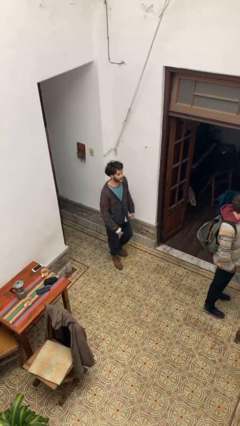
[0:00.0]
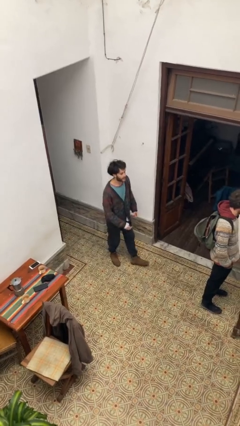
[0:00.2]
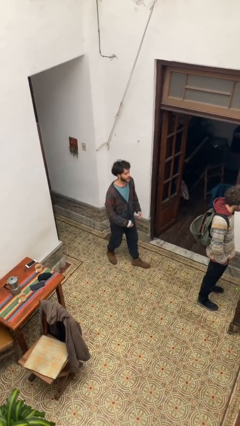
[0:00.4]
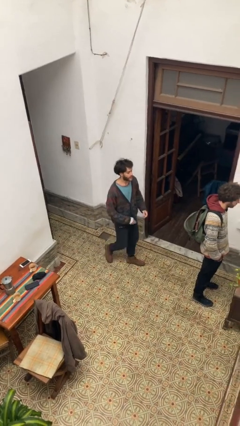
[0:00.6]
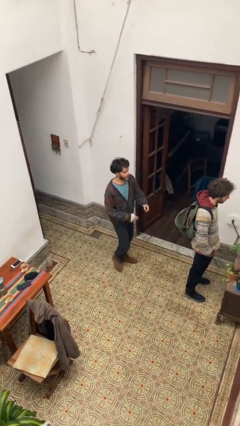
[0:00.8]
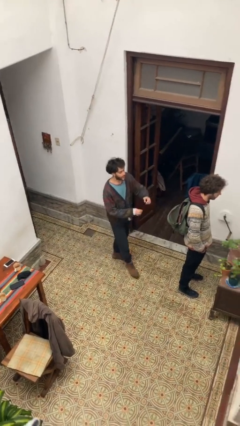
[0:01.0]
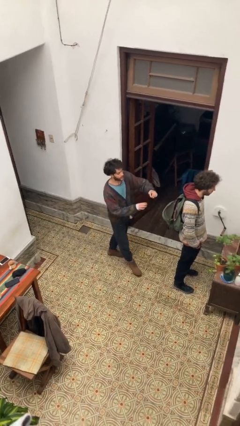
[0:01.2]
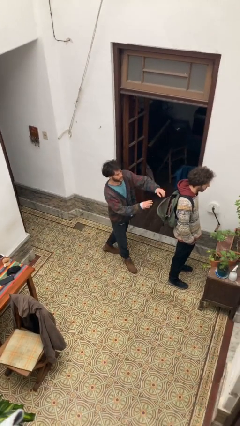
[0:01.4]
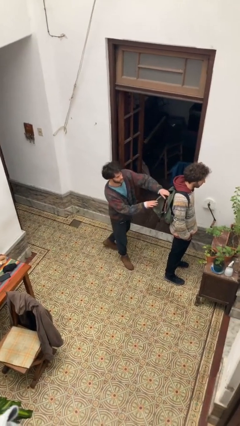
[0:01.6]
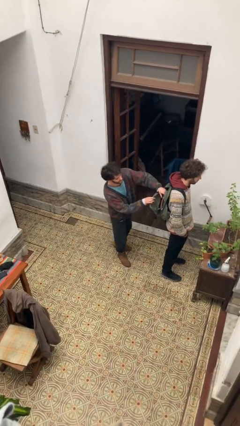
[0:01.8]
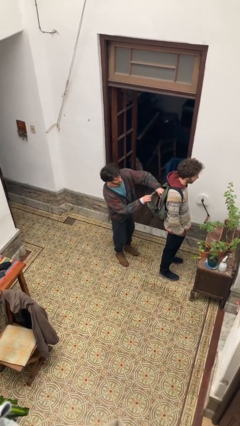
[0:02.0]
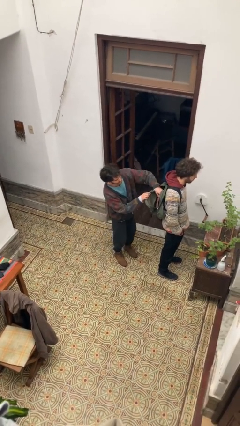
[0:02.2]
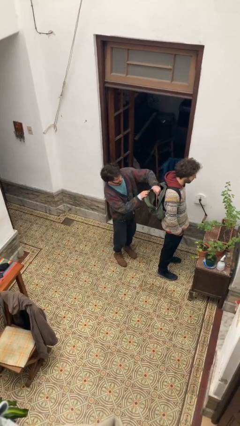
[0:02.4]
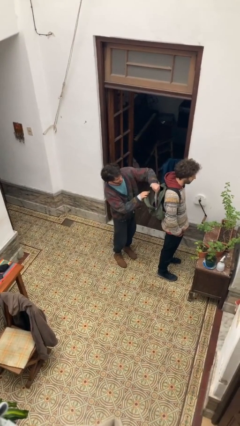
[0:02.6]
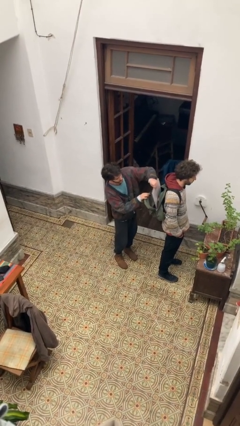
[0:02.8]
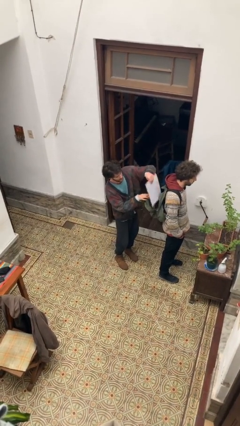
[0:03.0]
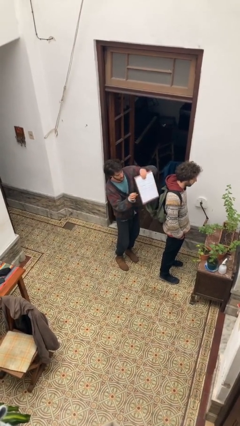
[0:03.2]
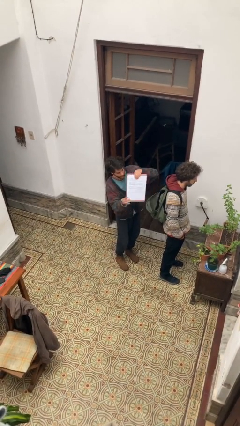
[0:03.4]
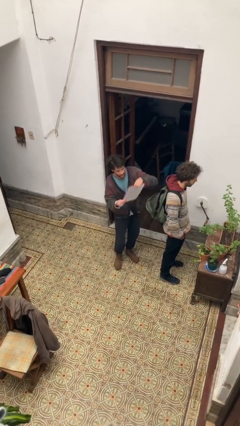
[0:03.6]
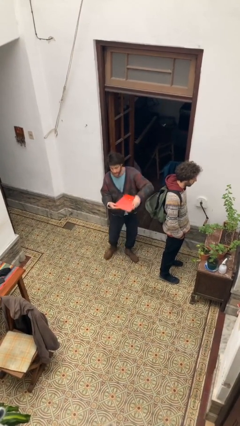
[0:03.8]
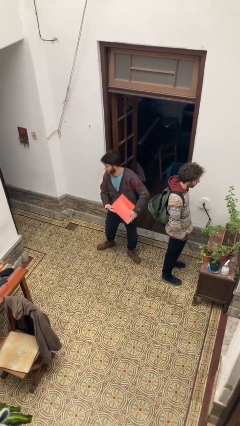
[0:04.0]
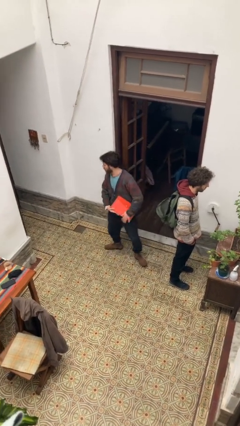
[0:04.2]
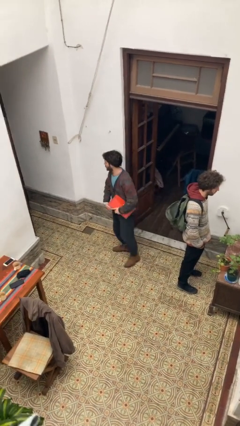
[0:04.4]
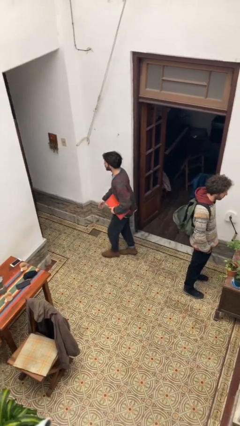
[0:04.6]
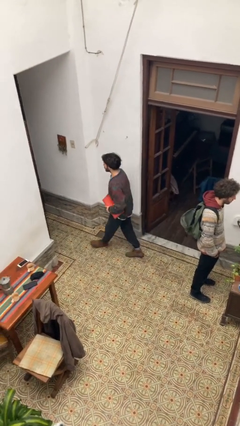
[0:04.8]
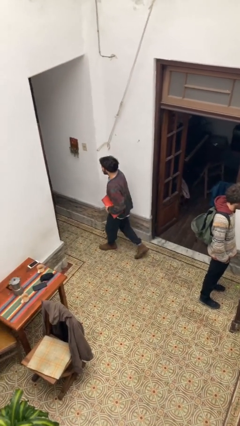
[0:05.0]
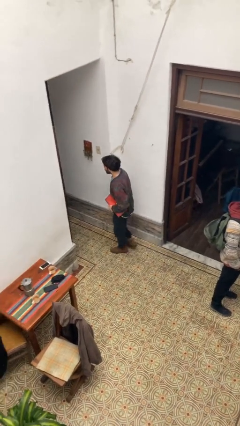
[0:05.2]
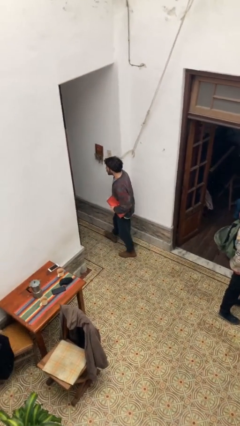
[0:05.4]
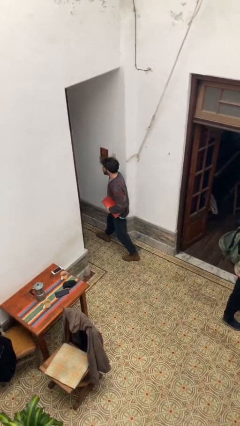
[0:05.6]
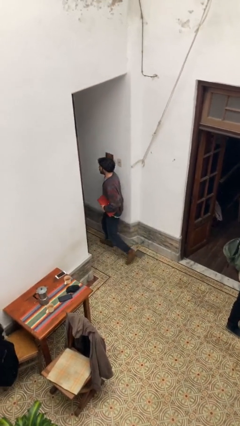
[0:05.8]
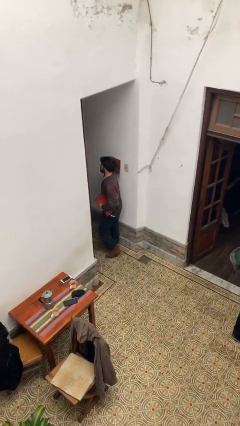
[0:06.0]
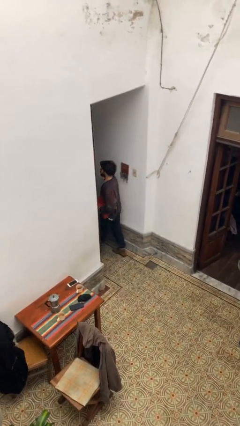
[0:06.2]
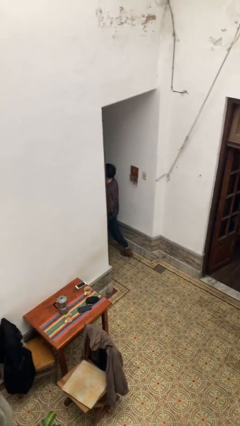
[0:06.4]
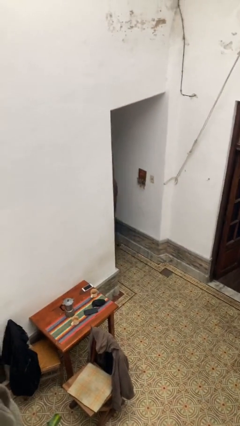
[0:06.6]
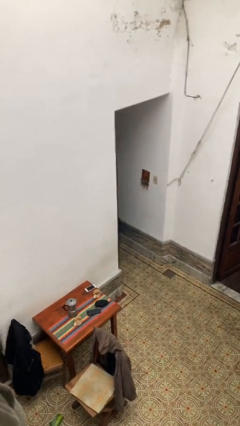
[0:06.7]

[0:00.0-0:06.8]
person steals object from person

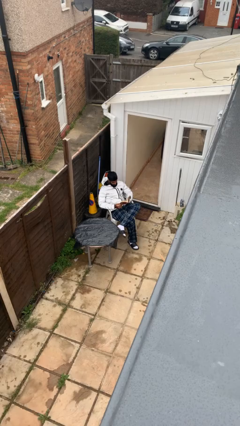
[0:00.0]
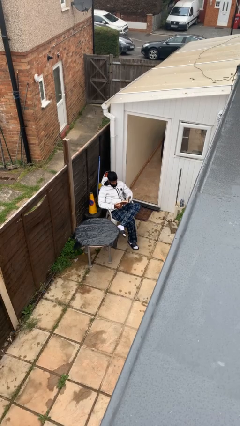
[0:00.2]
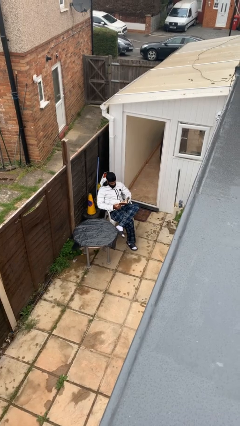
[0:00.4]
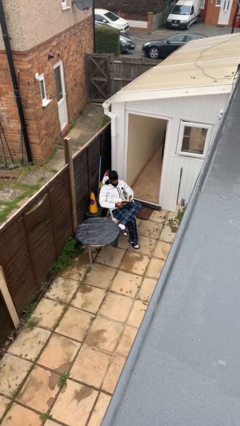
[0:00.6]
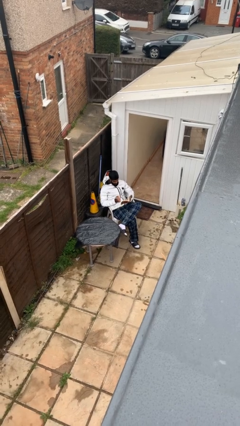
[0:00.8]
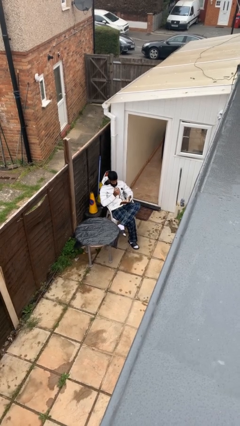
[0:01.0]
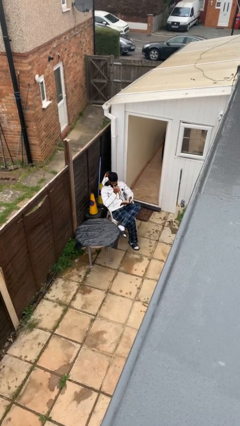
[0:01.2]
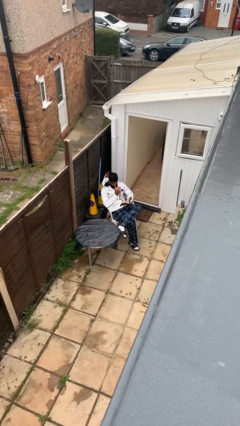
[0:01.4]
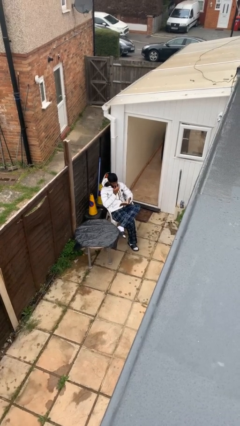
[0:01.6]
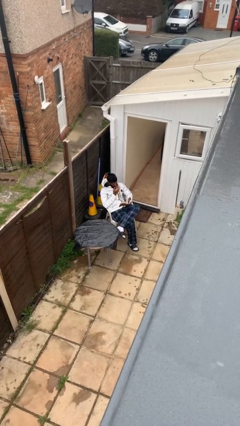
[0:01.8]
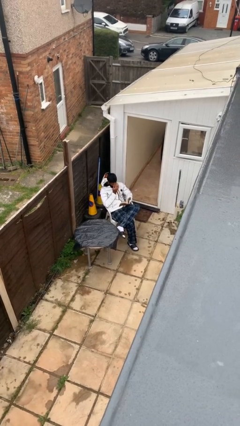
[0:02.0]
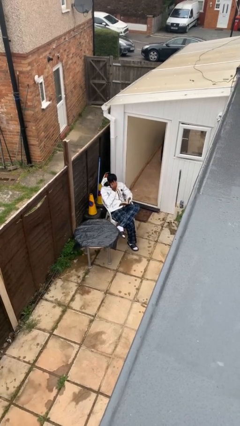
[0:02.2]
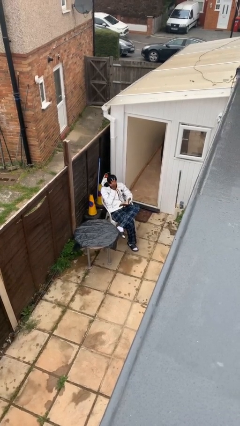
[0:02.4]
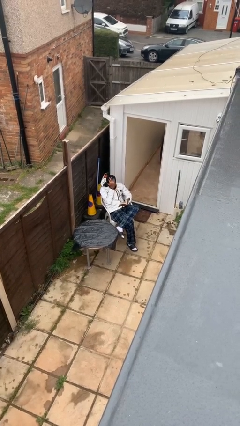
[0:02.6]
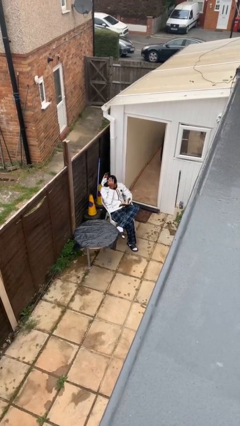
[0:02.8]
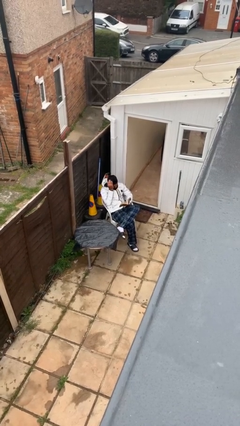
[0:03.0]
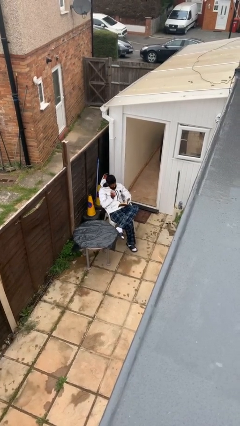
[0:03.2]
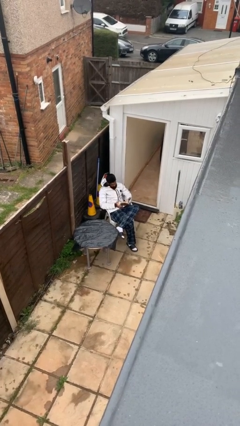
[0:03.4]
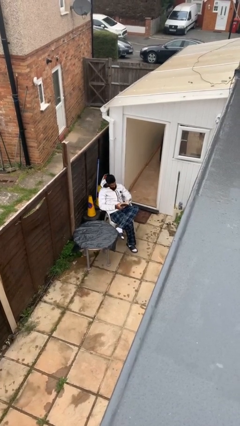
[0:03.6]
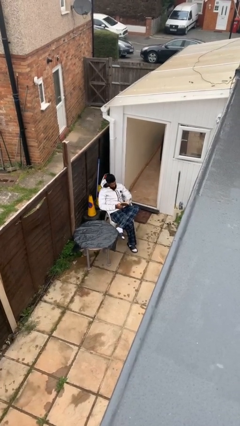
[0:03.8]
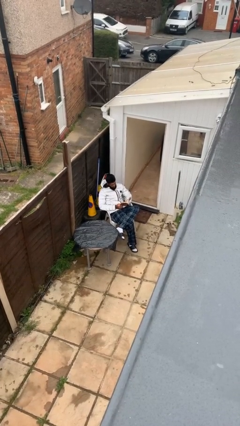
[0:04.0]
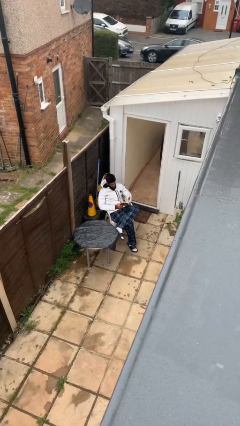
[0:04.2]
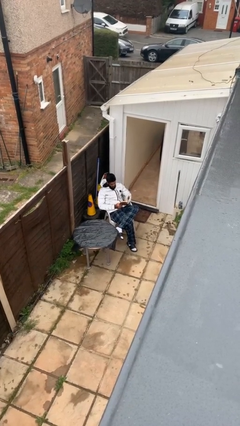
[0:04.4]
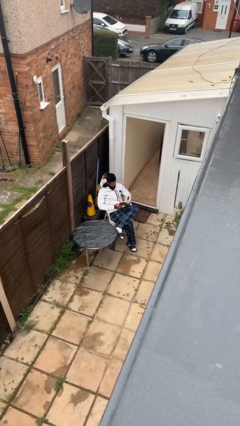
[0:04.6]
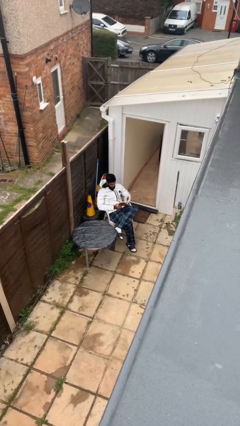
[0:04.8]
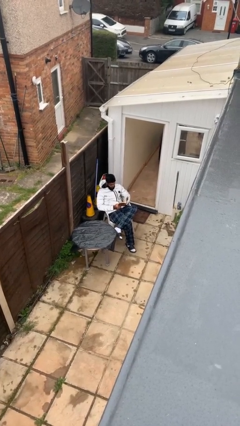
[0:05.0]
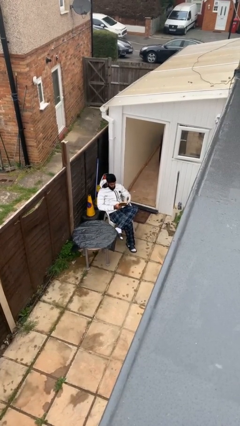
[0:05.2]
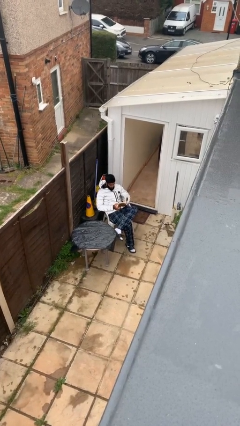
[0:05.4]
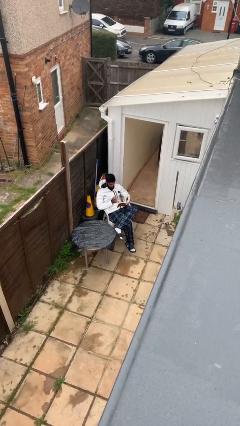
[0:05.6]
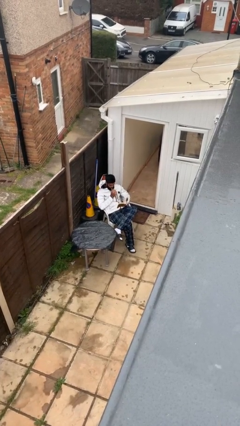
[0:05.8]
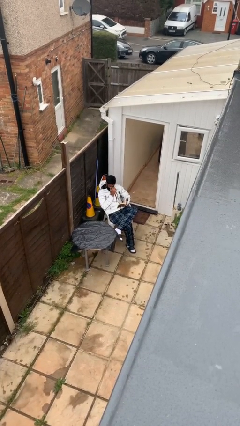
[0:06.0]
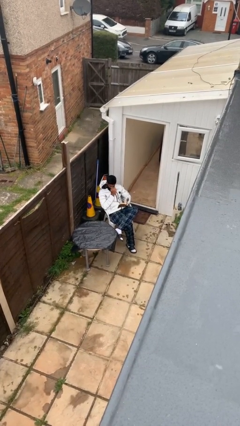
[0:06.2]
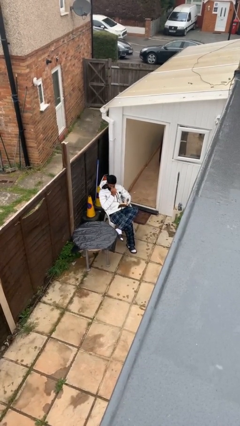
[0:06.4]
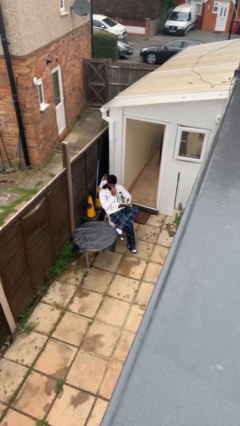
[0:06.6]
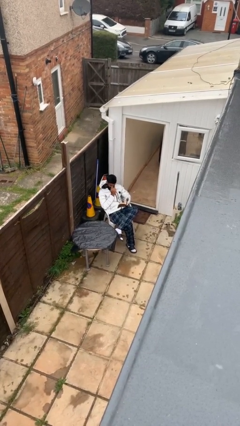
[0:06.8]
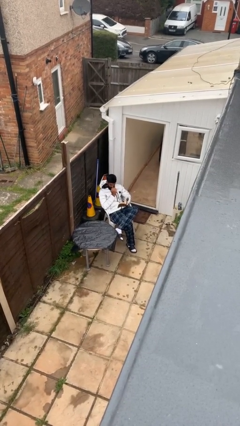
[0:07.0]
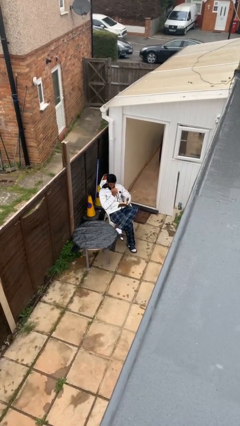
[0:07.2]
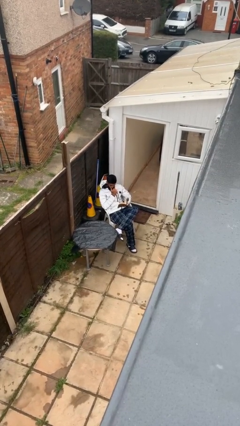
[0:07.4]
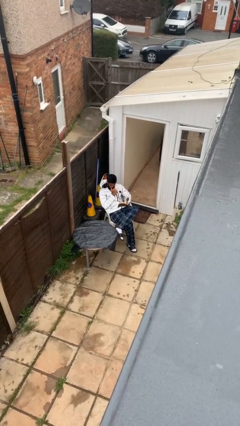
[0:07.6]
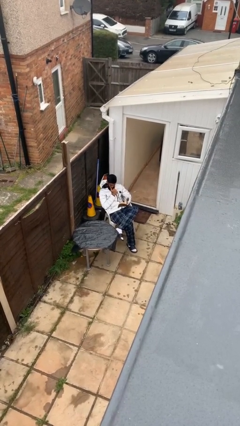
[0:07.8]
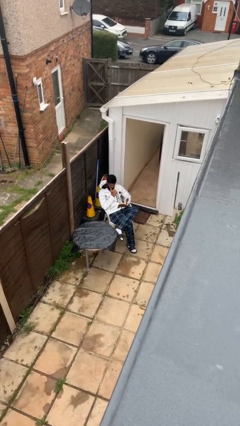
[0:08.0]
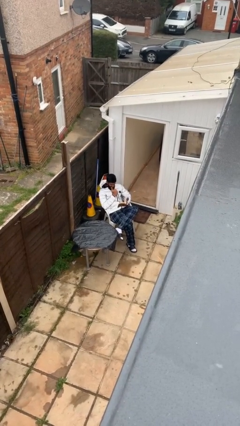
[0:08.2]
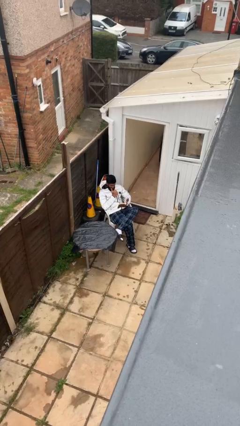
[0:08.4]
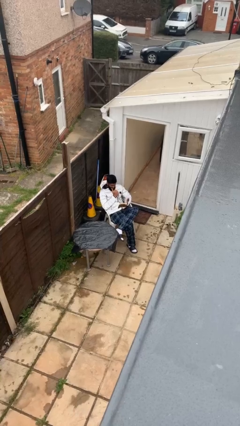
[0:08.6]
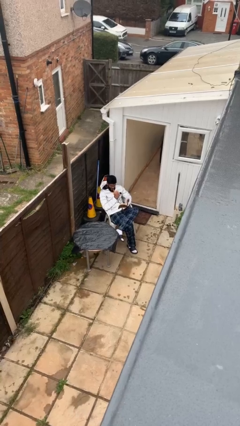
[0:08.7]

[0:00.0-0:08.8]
person reads document

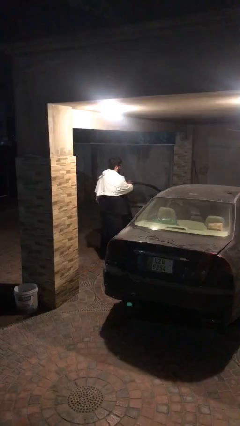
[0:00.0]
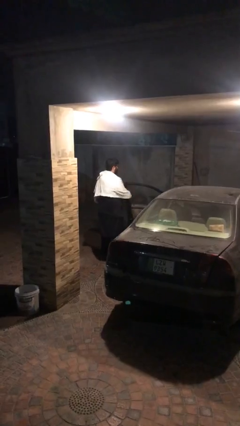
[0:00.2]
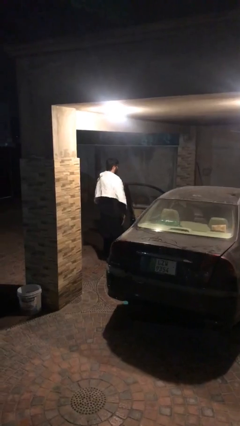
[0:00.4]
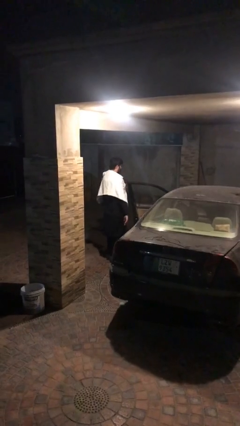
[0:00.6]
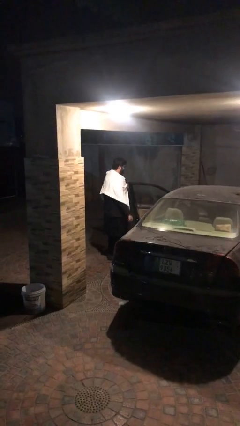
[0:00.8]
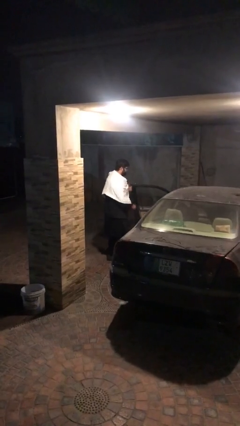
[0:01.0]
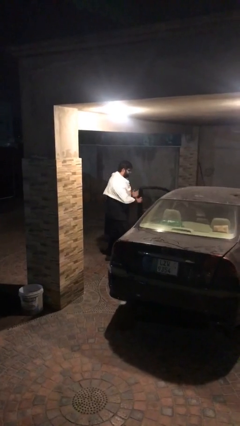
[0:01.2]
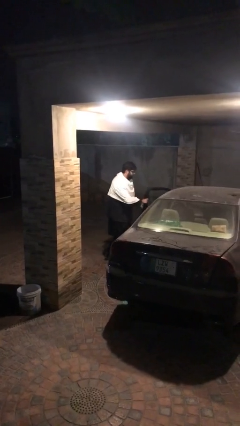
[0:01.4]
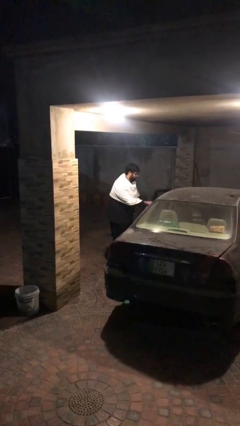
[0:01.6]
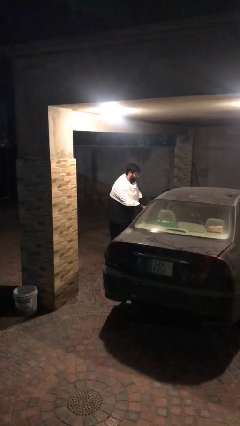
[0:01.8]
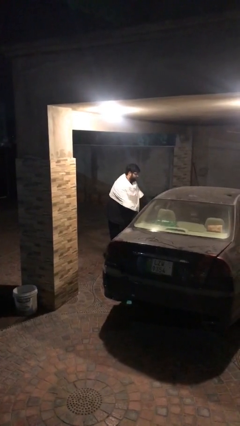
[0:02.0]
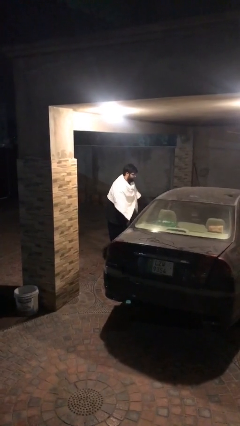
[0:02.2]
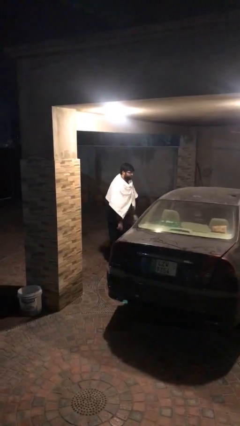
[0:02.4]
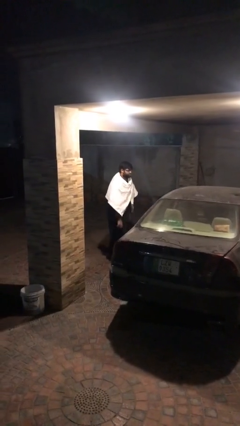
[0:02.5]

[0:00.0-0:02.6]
person closes car door
